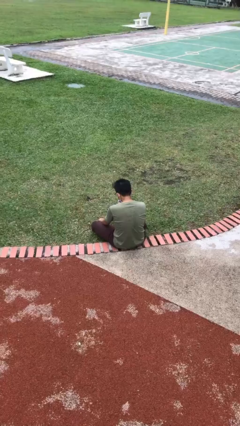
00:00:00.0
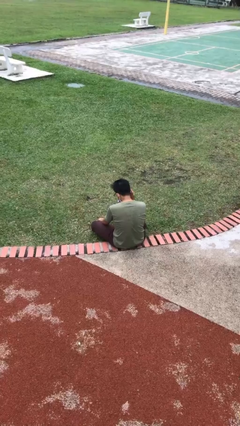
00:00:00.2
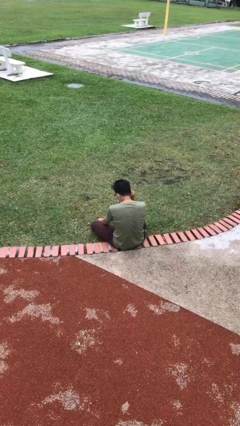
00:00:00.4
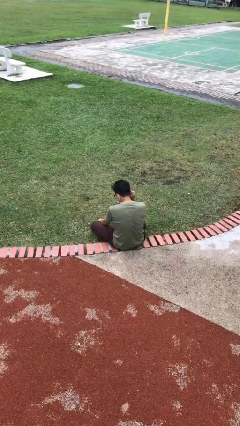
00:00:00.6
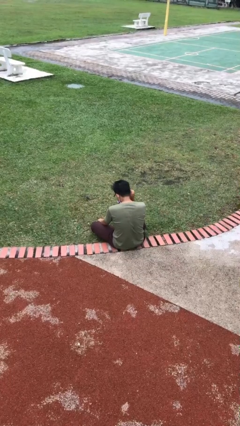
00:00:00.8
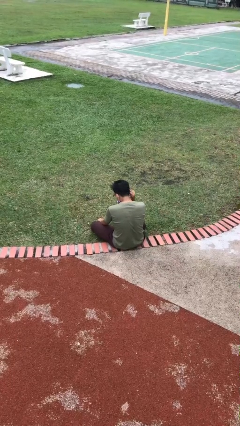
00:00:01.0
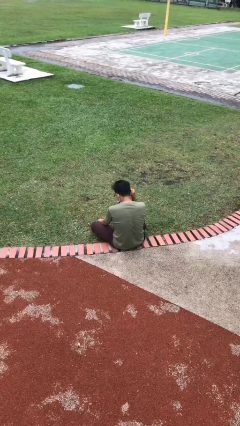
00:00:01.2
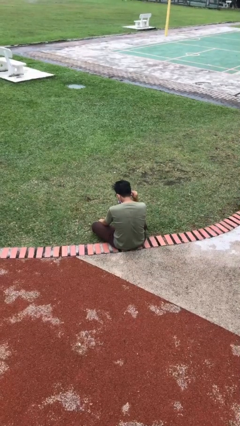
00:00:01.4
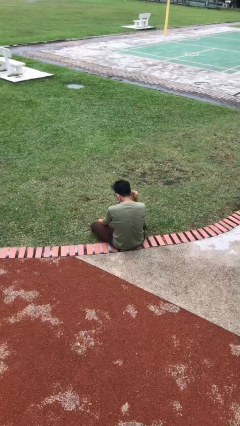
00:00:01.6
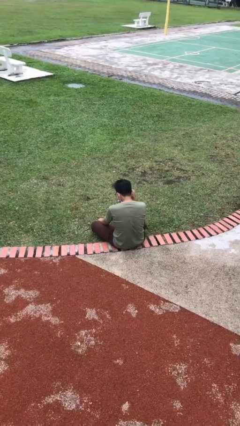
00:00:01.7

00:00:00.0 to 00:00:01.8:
person touches earlobe

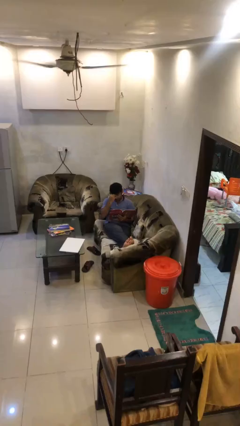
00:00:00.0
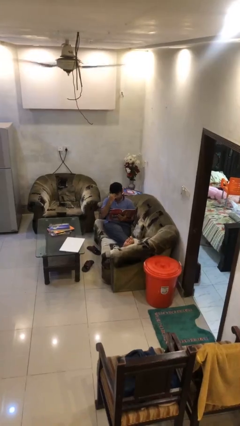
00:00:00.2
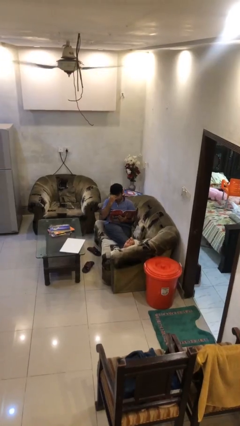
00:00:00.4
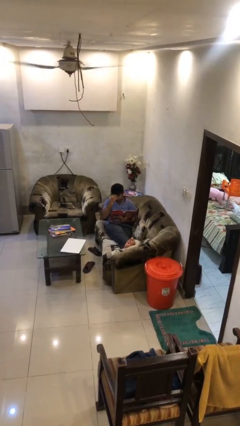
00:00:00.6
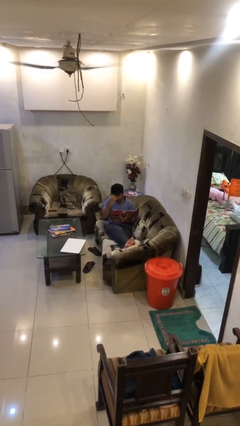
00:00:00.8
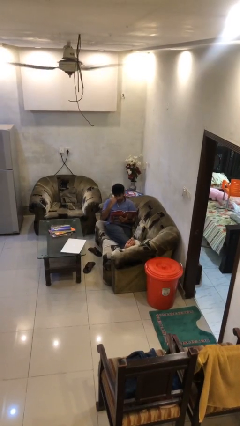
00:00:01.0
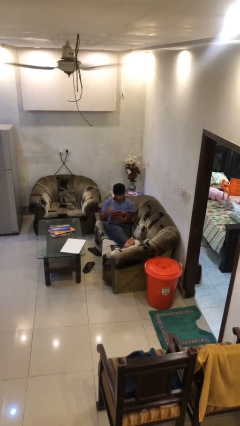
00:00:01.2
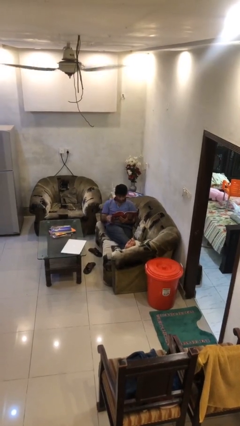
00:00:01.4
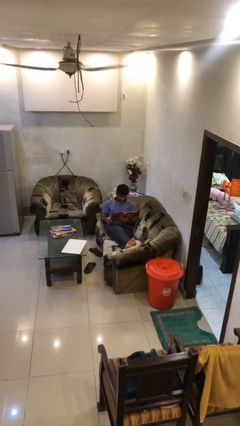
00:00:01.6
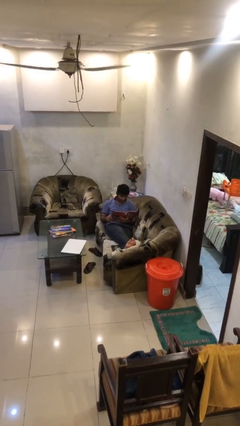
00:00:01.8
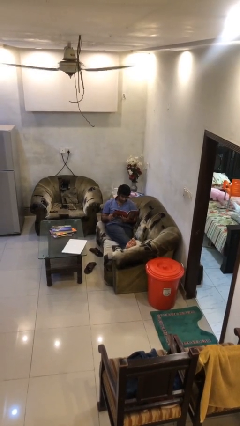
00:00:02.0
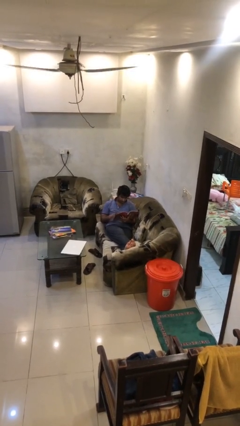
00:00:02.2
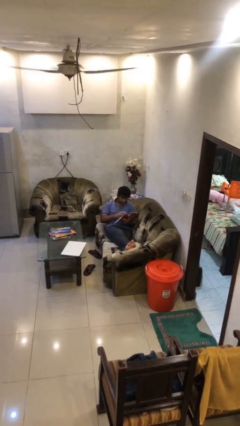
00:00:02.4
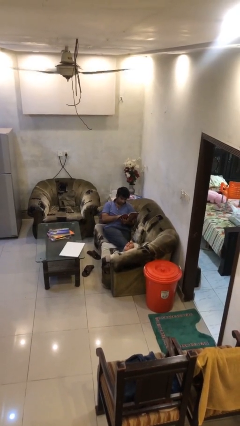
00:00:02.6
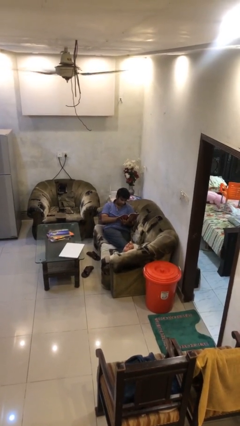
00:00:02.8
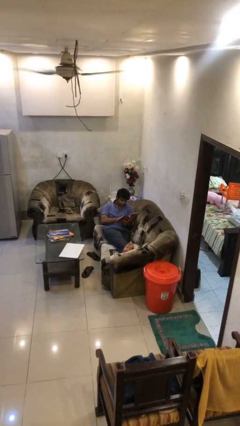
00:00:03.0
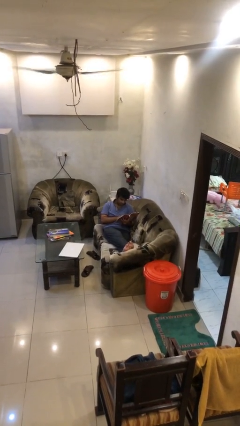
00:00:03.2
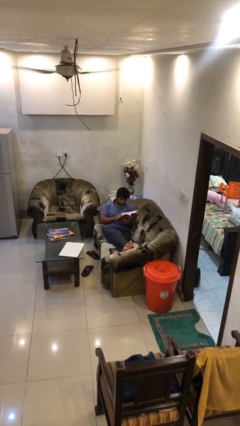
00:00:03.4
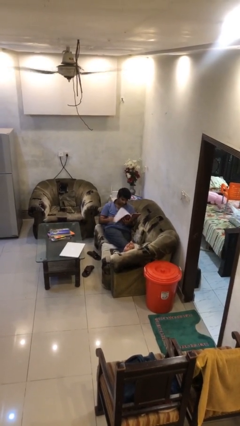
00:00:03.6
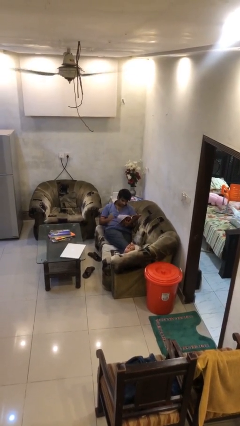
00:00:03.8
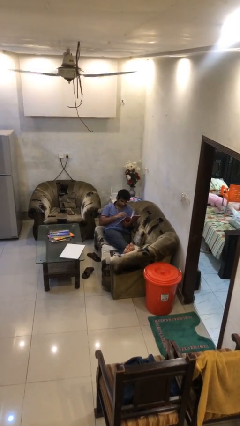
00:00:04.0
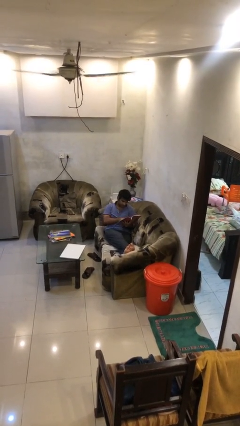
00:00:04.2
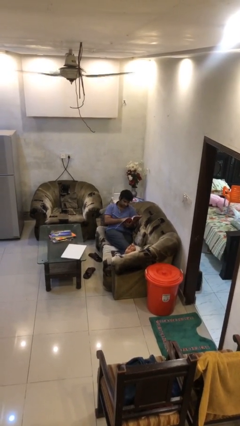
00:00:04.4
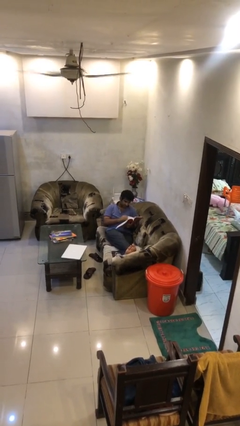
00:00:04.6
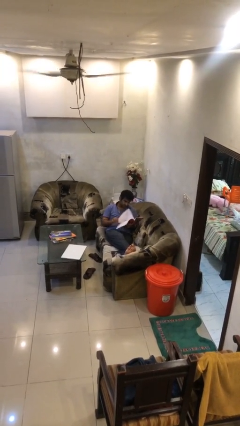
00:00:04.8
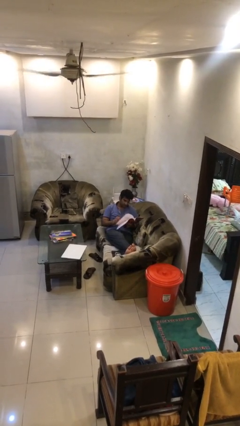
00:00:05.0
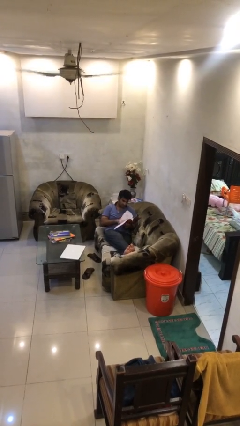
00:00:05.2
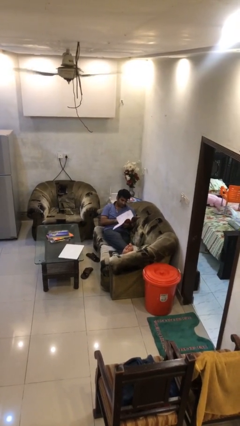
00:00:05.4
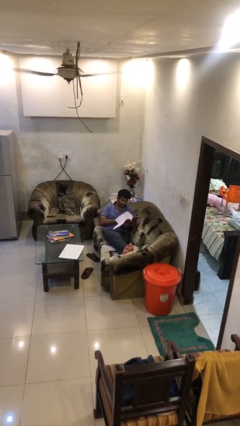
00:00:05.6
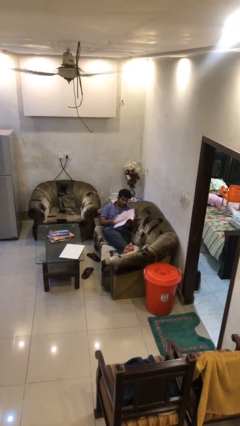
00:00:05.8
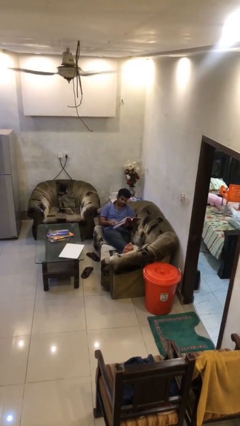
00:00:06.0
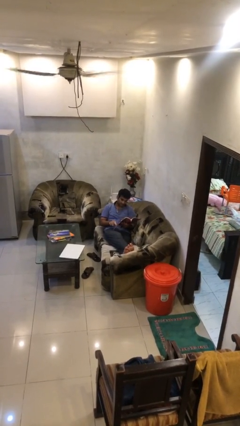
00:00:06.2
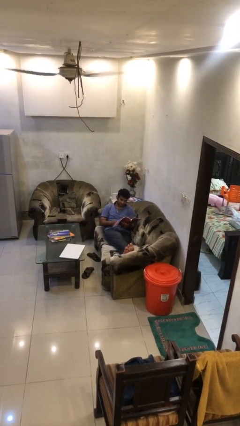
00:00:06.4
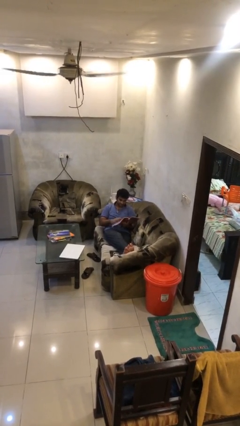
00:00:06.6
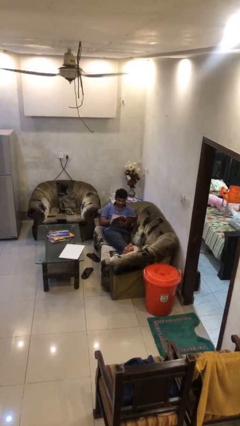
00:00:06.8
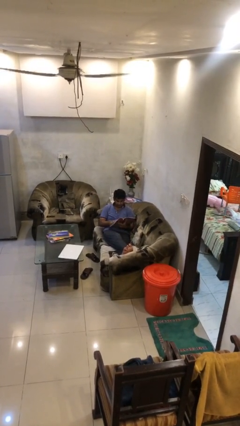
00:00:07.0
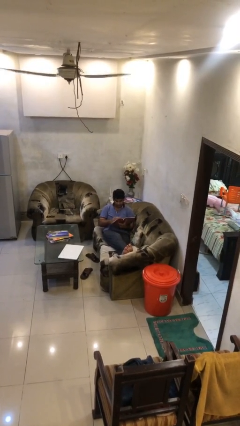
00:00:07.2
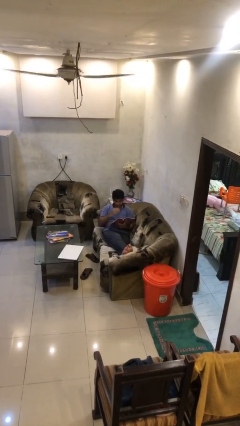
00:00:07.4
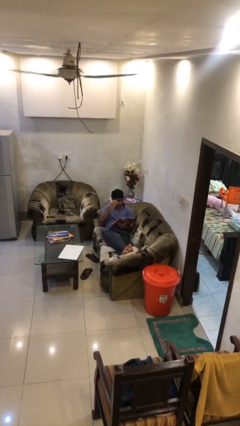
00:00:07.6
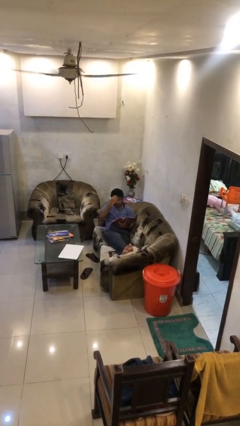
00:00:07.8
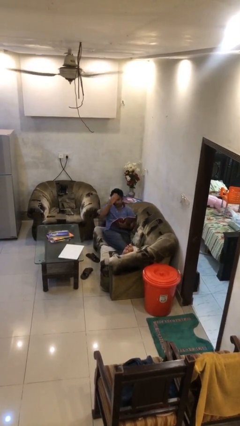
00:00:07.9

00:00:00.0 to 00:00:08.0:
person reads document

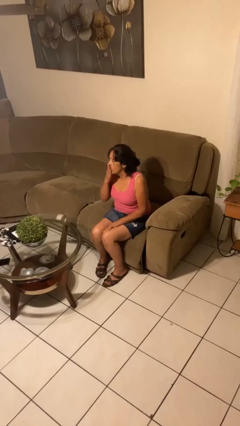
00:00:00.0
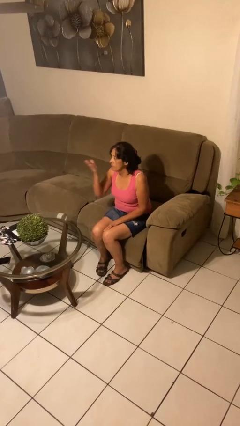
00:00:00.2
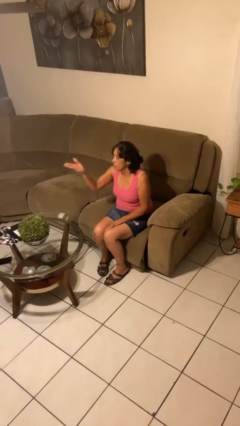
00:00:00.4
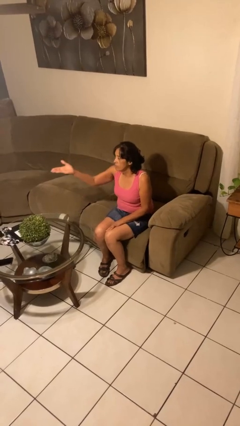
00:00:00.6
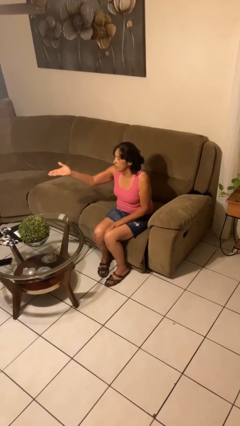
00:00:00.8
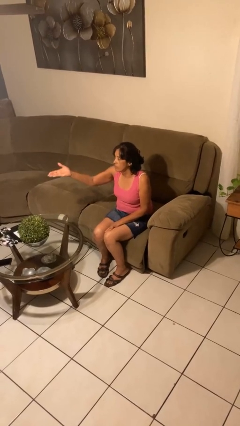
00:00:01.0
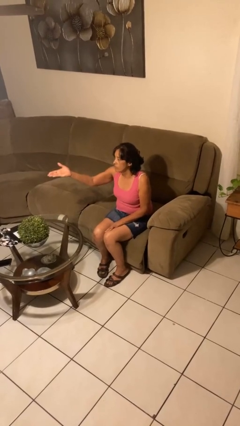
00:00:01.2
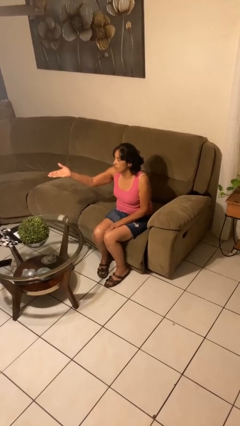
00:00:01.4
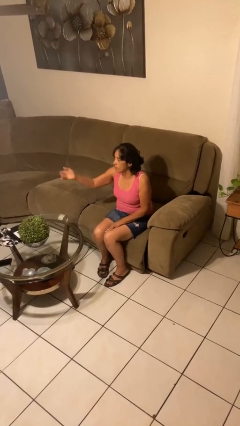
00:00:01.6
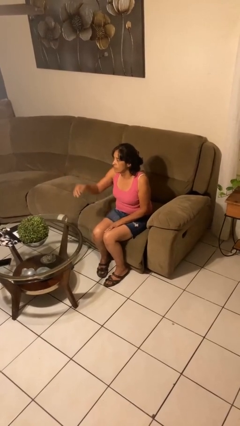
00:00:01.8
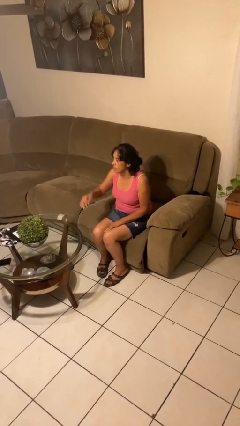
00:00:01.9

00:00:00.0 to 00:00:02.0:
person gestures blow kiss

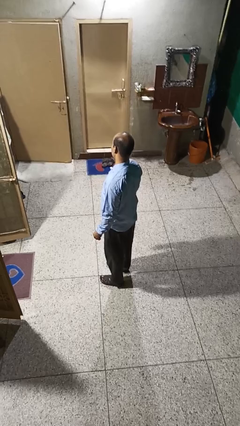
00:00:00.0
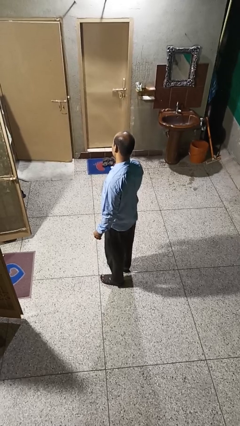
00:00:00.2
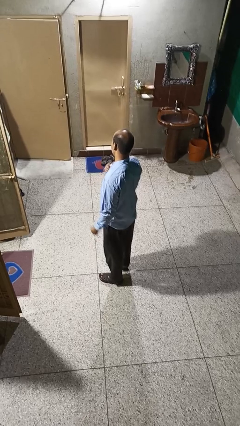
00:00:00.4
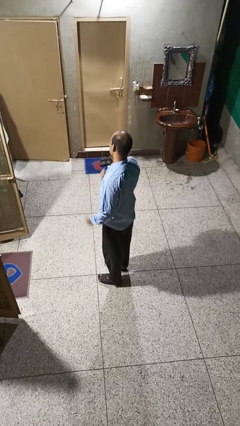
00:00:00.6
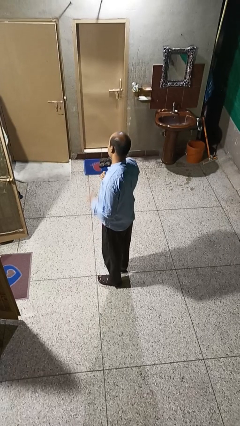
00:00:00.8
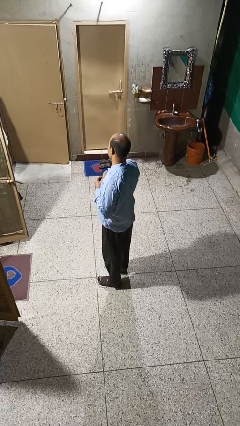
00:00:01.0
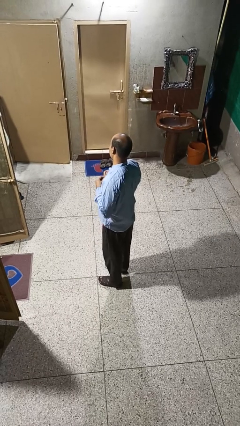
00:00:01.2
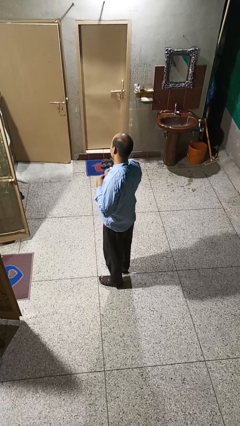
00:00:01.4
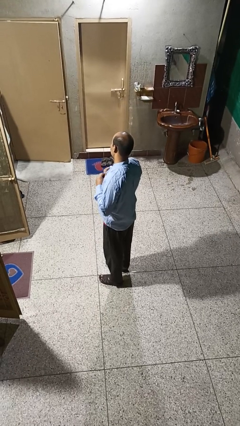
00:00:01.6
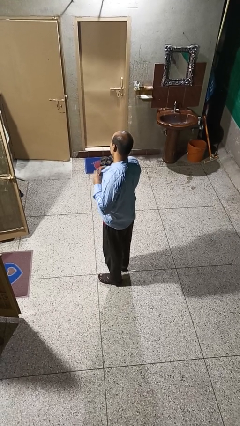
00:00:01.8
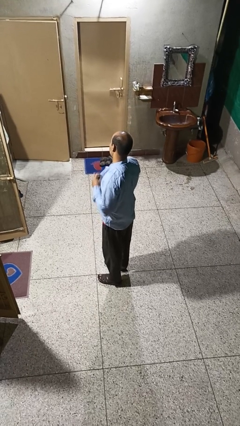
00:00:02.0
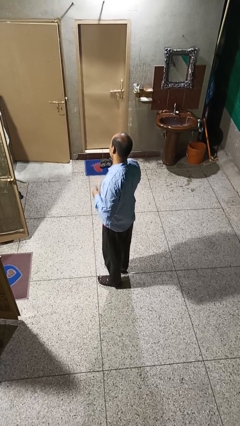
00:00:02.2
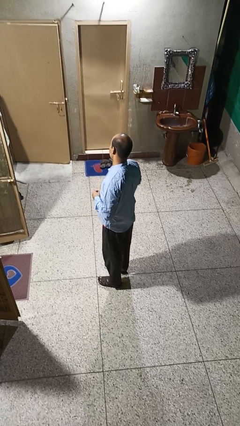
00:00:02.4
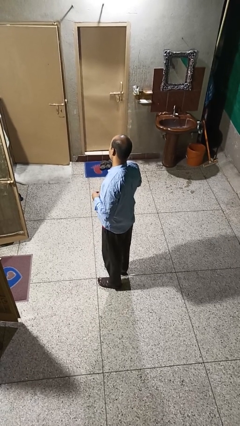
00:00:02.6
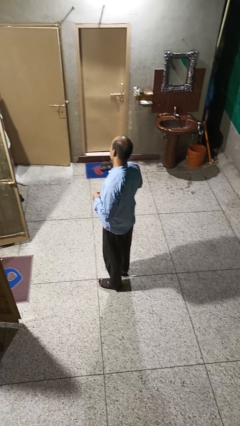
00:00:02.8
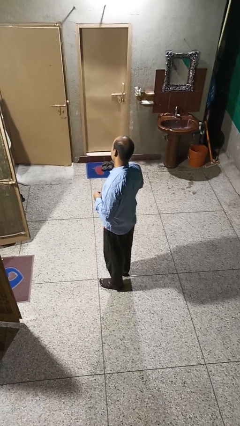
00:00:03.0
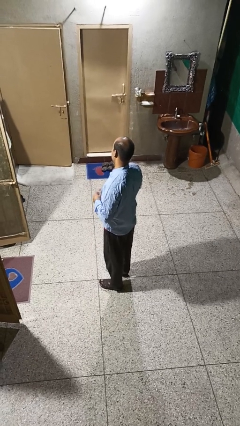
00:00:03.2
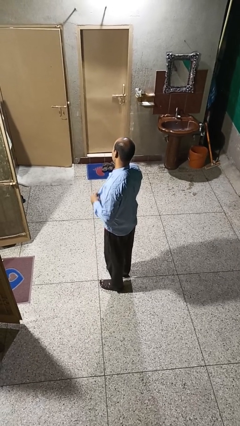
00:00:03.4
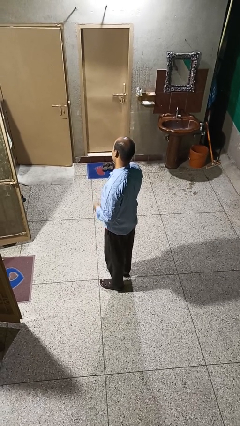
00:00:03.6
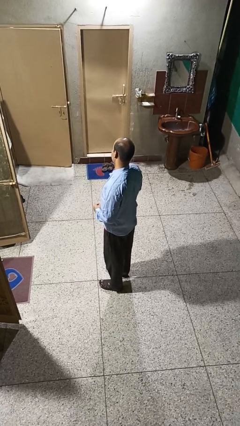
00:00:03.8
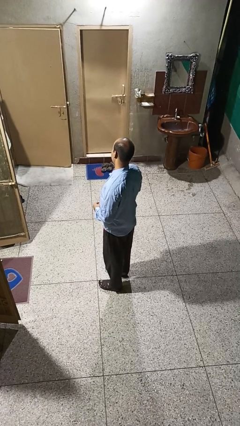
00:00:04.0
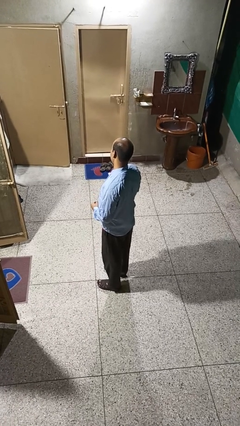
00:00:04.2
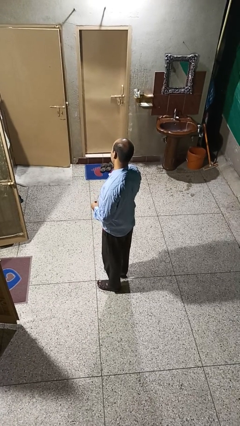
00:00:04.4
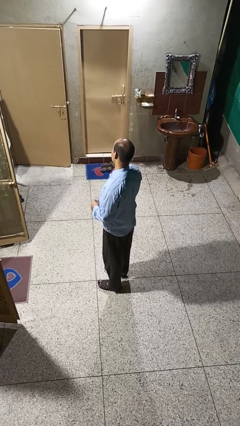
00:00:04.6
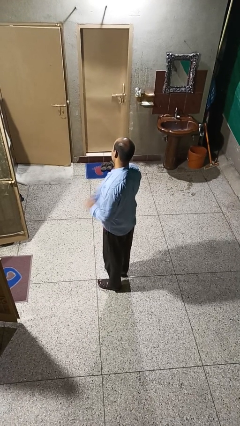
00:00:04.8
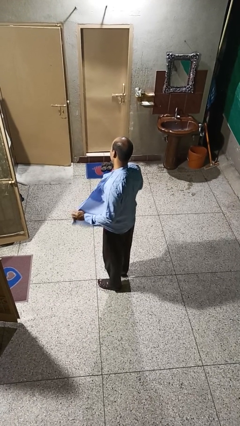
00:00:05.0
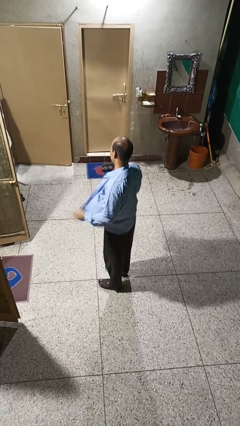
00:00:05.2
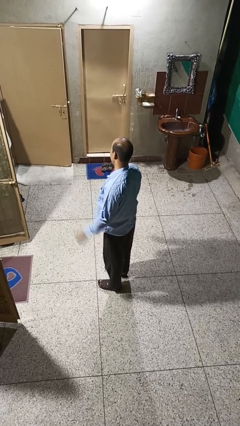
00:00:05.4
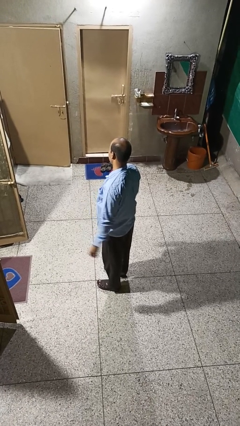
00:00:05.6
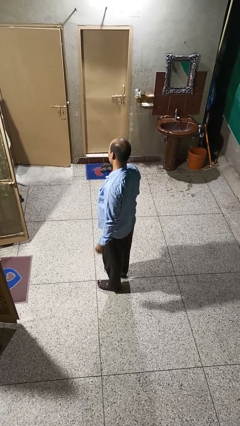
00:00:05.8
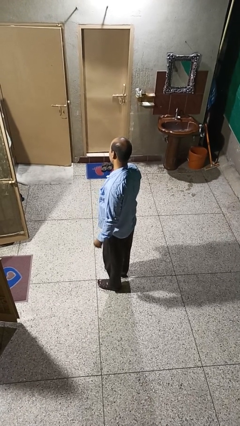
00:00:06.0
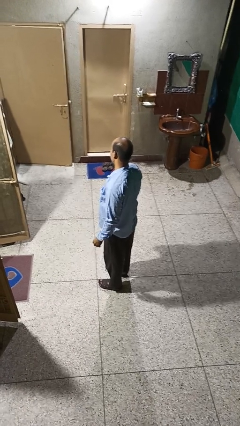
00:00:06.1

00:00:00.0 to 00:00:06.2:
person unbuttons shirt
